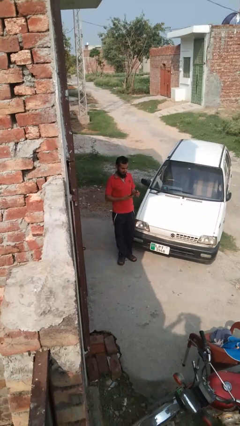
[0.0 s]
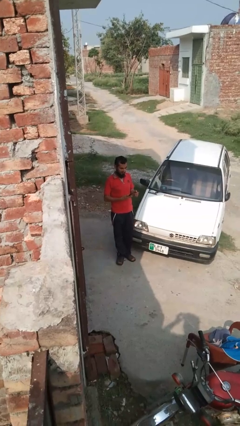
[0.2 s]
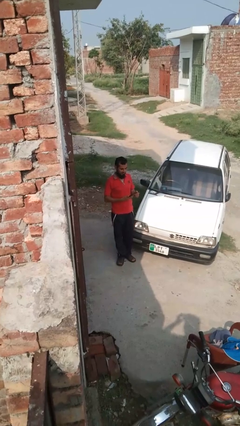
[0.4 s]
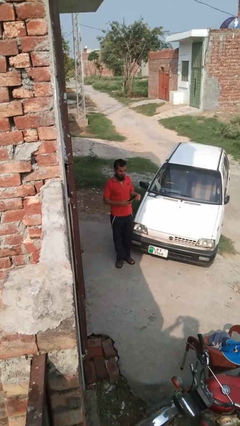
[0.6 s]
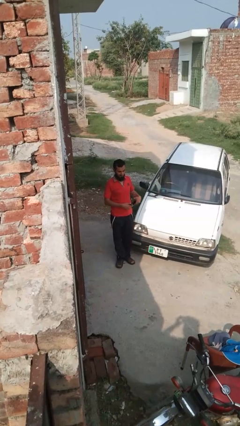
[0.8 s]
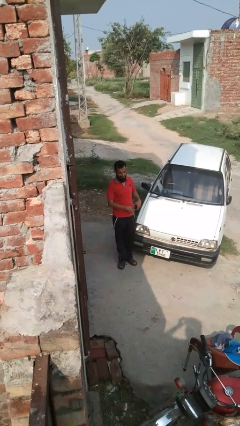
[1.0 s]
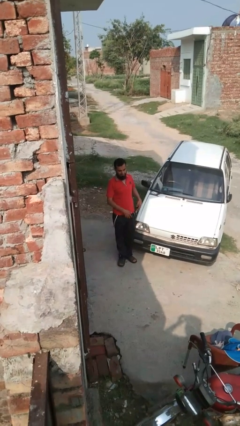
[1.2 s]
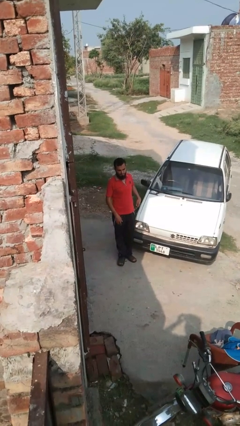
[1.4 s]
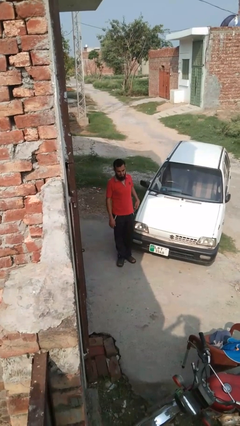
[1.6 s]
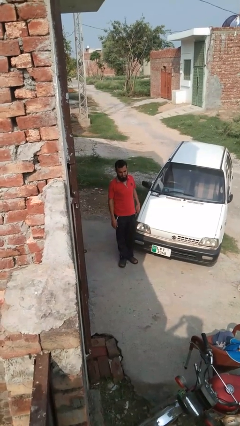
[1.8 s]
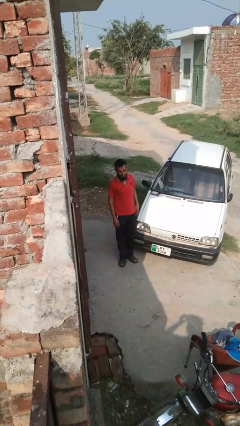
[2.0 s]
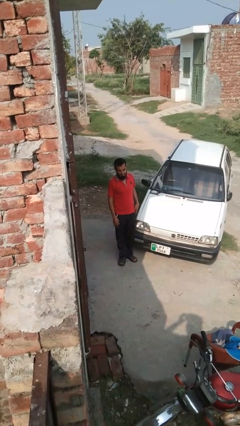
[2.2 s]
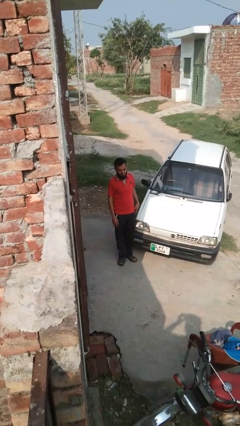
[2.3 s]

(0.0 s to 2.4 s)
person puts phone into pocket

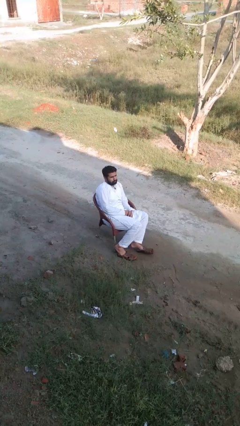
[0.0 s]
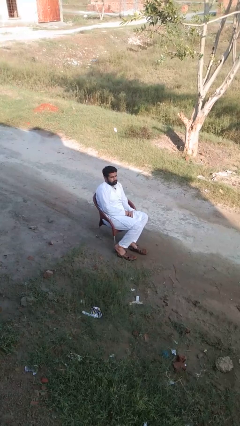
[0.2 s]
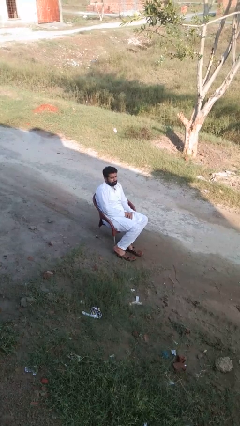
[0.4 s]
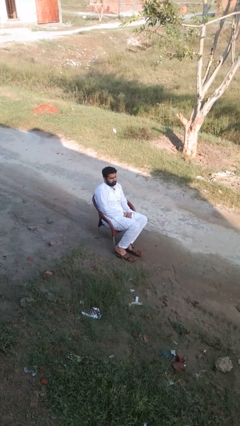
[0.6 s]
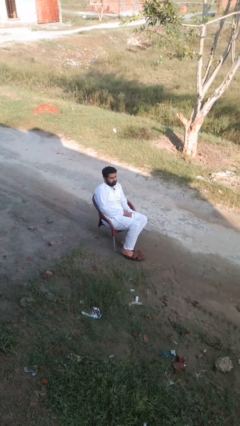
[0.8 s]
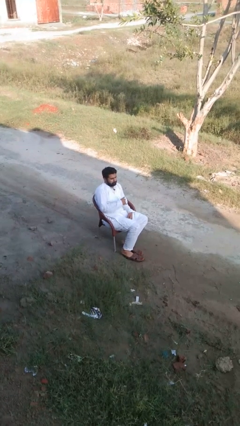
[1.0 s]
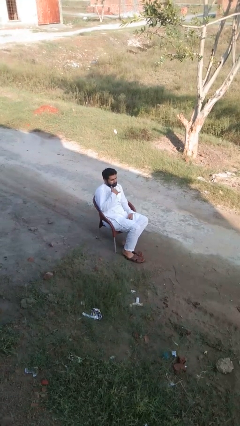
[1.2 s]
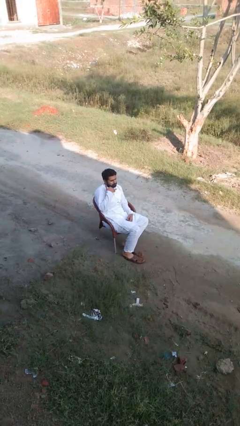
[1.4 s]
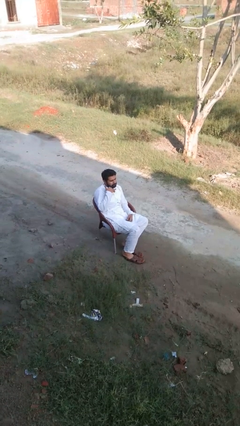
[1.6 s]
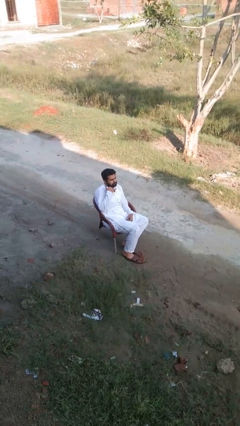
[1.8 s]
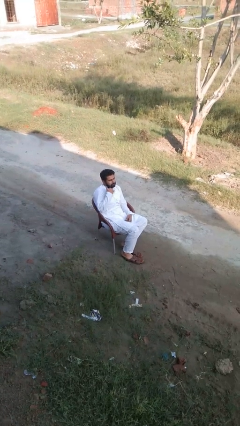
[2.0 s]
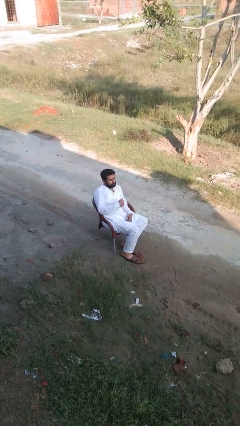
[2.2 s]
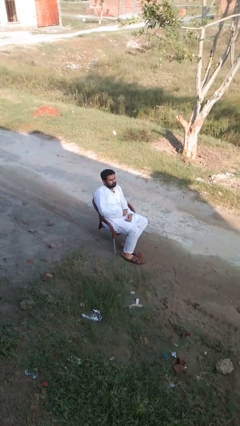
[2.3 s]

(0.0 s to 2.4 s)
person gestures call me

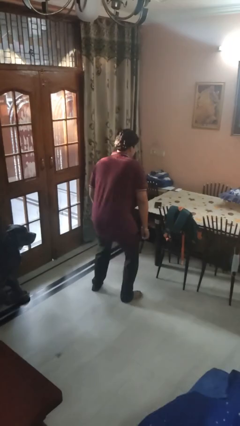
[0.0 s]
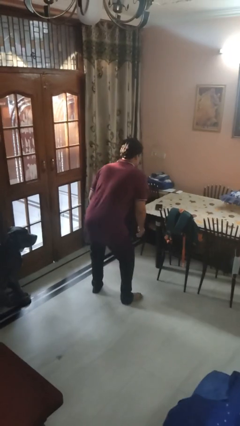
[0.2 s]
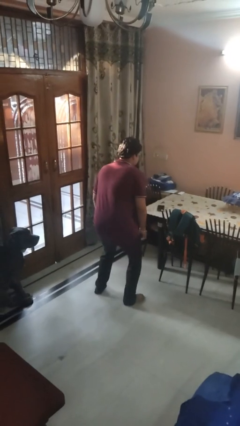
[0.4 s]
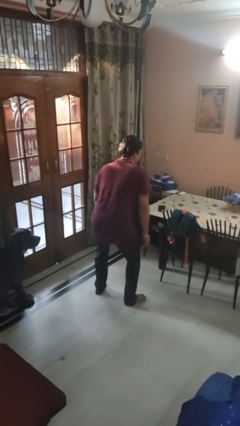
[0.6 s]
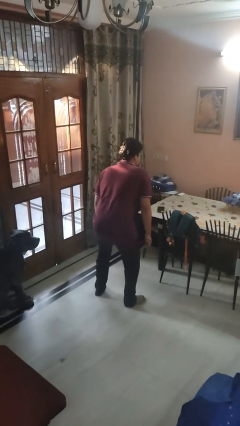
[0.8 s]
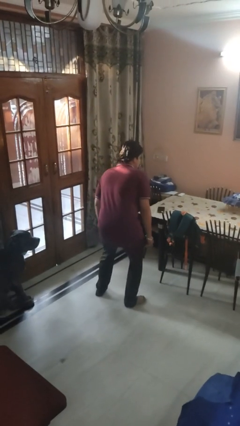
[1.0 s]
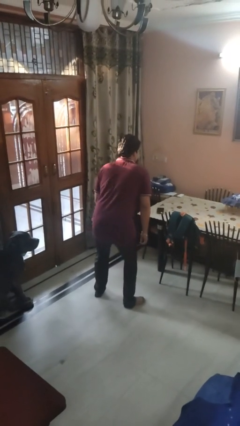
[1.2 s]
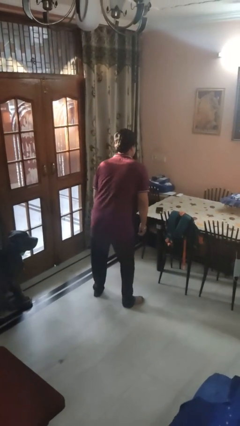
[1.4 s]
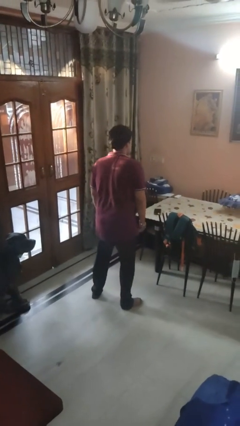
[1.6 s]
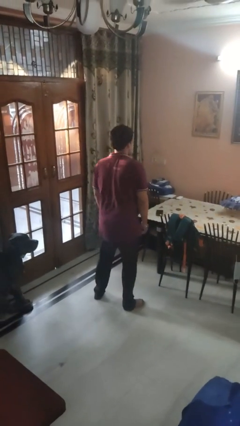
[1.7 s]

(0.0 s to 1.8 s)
person wiggles hips

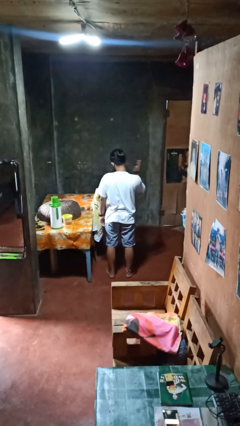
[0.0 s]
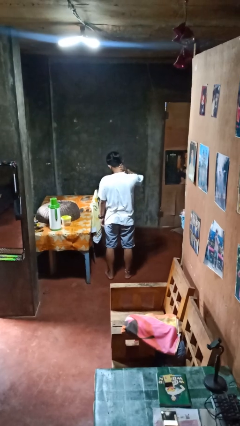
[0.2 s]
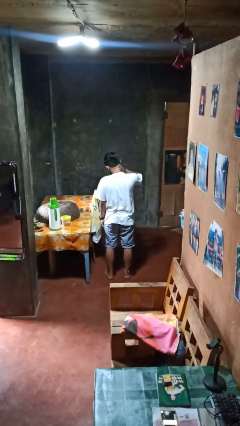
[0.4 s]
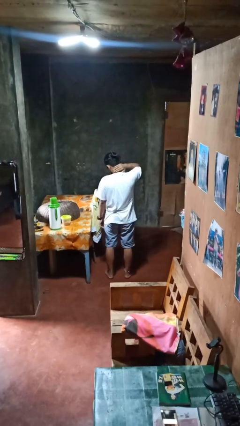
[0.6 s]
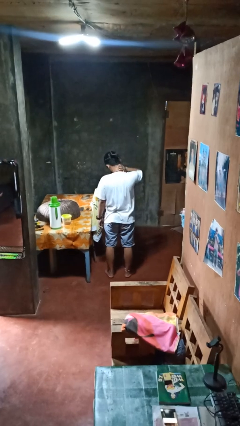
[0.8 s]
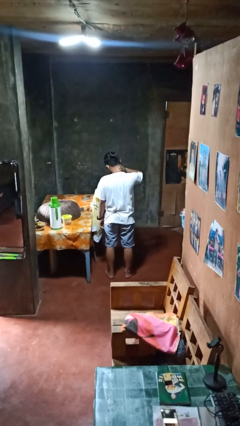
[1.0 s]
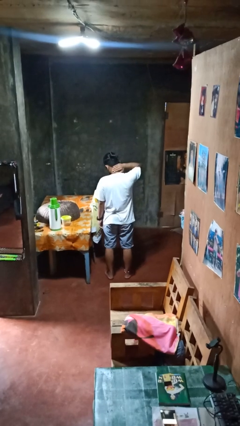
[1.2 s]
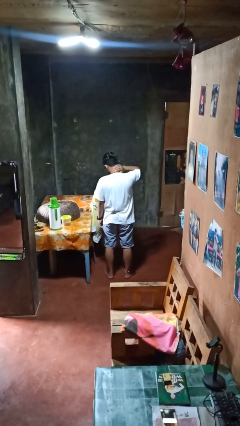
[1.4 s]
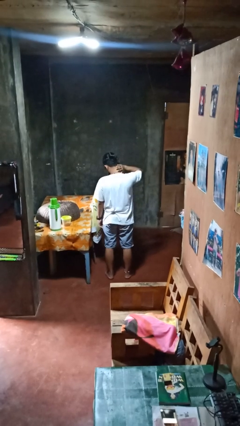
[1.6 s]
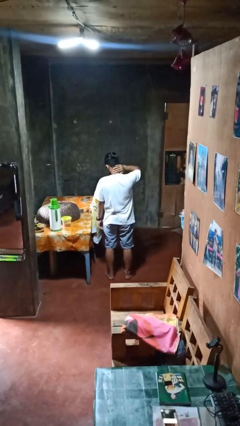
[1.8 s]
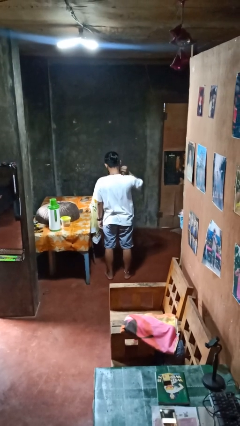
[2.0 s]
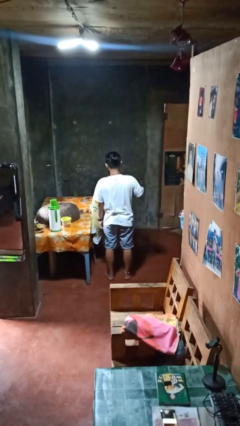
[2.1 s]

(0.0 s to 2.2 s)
person swats bug

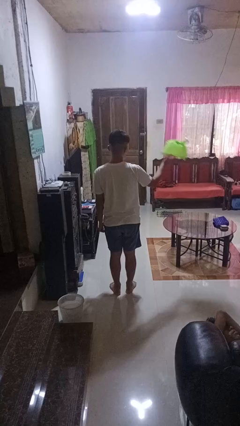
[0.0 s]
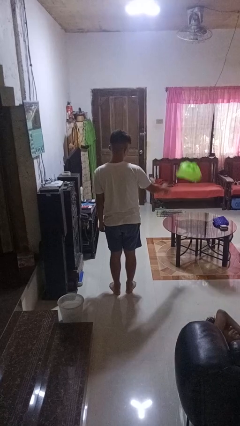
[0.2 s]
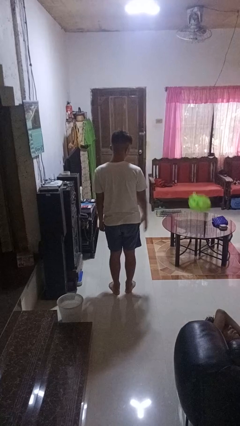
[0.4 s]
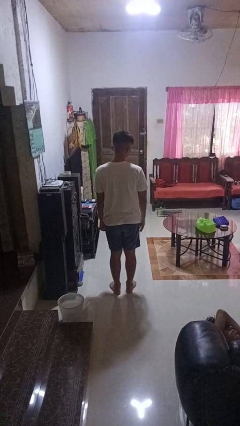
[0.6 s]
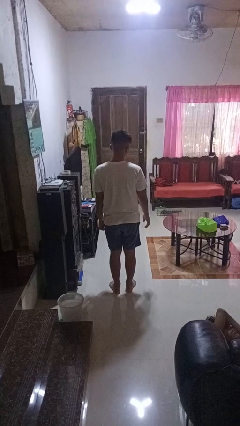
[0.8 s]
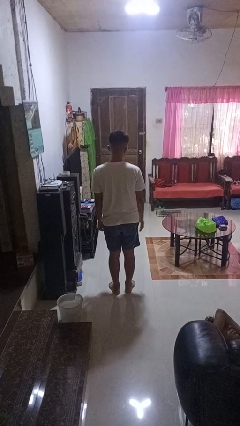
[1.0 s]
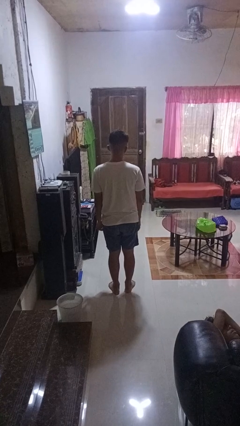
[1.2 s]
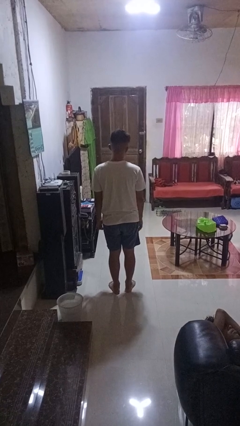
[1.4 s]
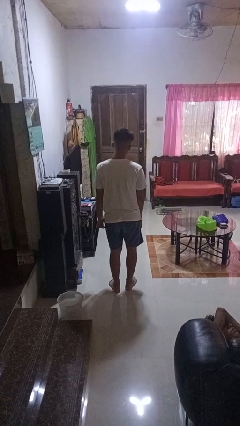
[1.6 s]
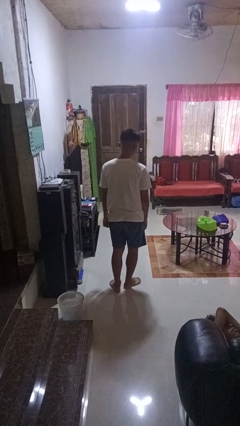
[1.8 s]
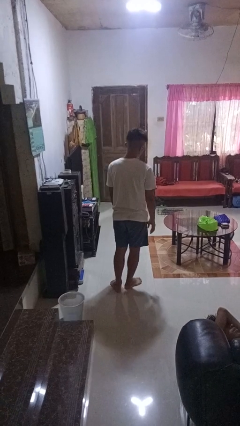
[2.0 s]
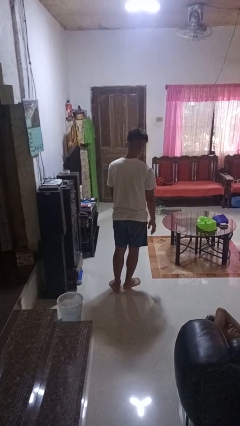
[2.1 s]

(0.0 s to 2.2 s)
person throws object on table

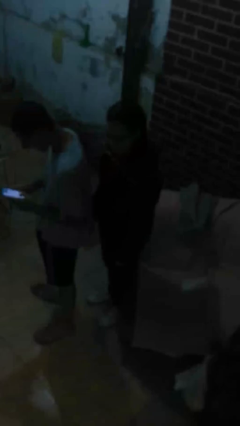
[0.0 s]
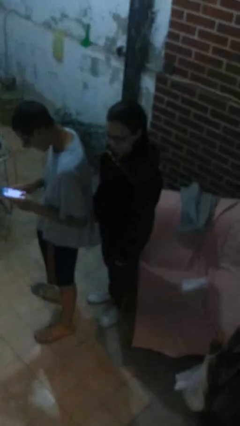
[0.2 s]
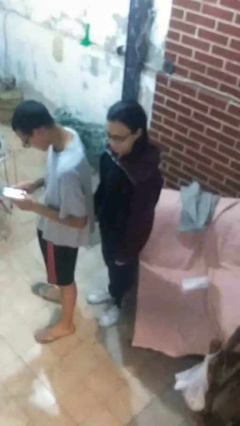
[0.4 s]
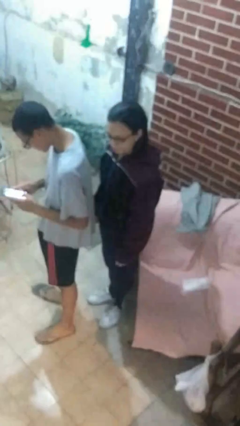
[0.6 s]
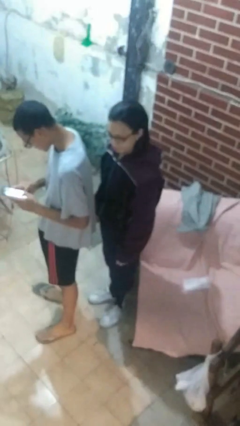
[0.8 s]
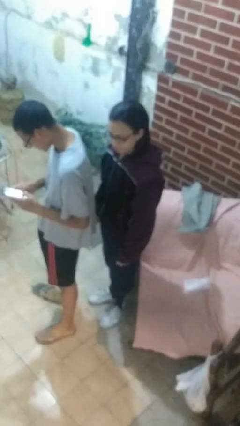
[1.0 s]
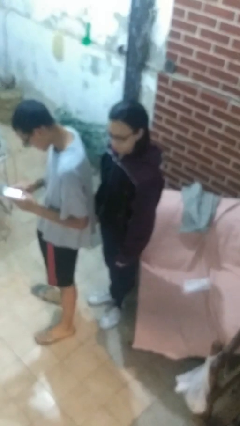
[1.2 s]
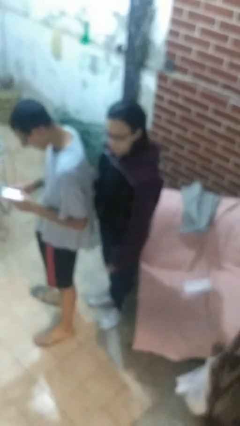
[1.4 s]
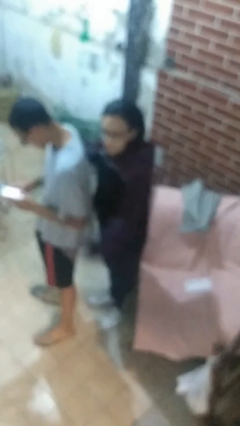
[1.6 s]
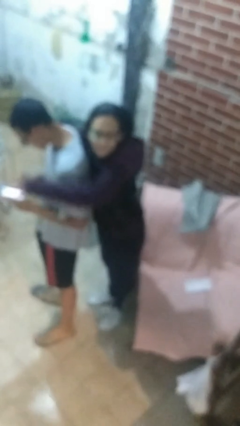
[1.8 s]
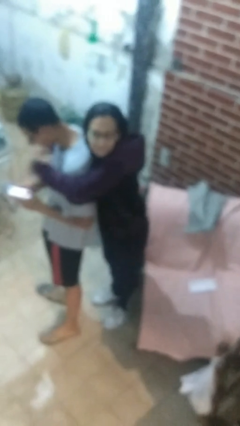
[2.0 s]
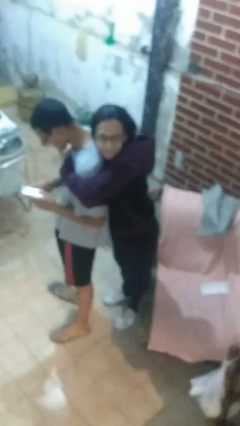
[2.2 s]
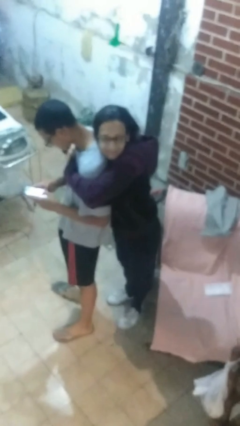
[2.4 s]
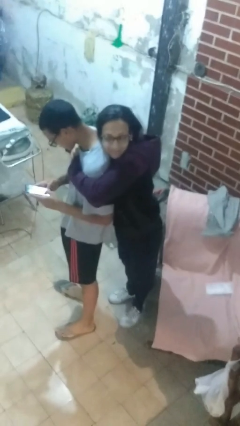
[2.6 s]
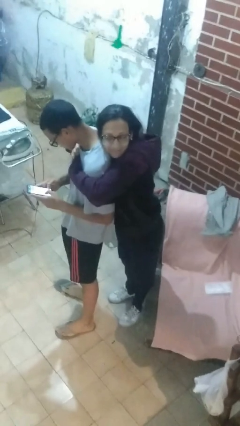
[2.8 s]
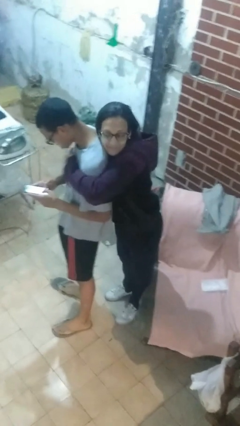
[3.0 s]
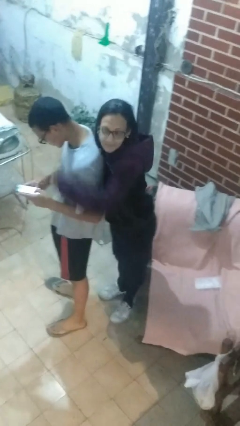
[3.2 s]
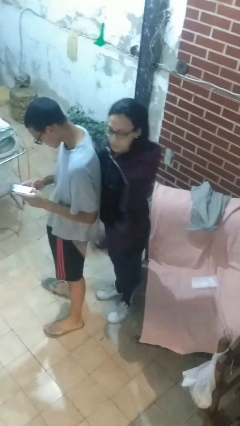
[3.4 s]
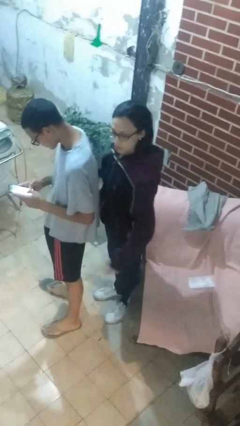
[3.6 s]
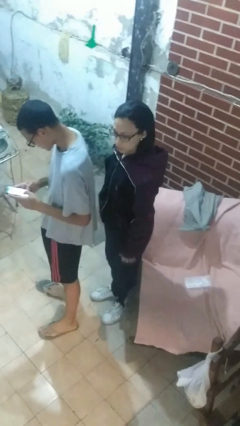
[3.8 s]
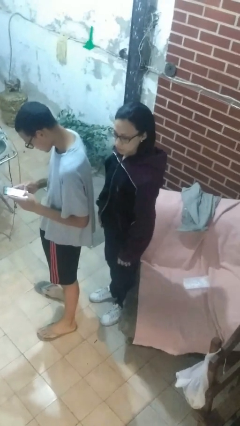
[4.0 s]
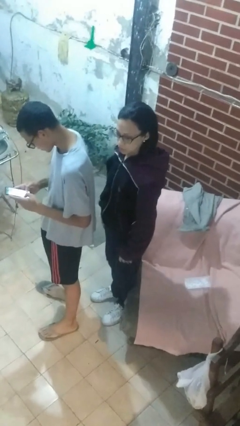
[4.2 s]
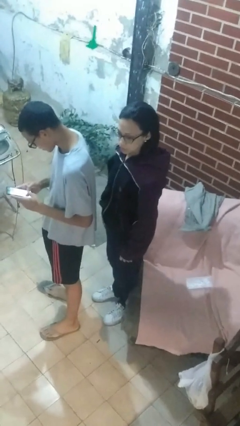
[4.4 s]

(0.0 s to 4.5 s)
person hugs person from behind

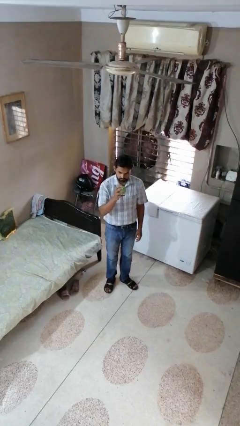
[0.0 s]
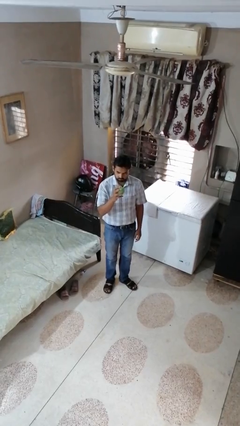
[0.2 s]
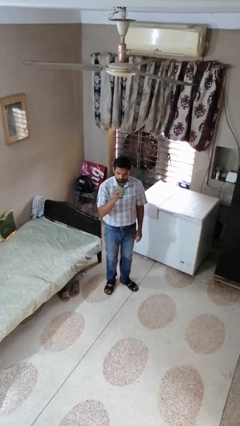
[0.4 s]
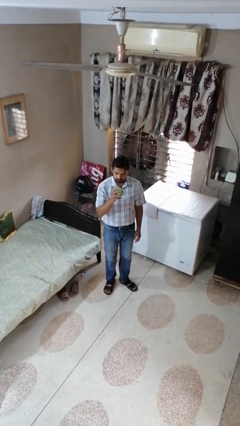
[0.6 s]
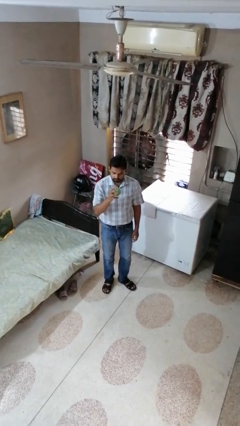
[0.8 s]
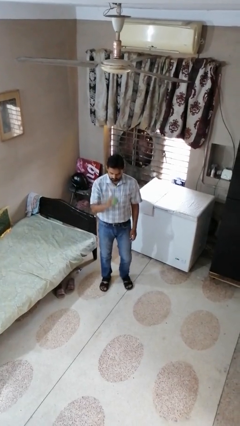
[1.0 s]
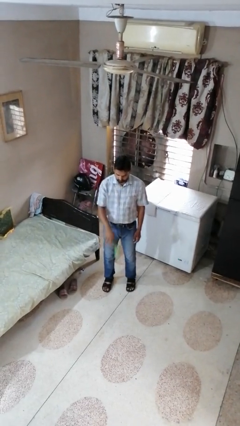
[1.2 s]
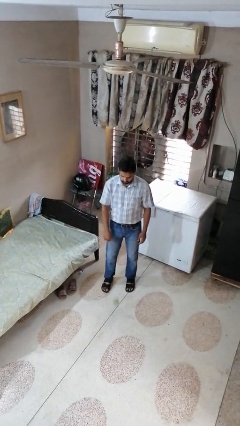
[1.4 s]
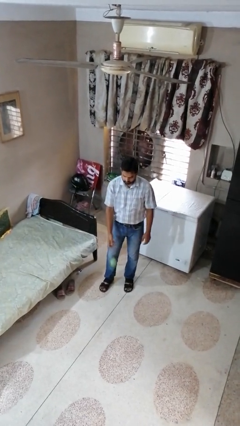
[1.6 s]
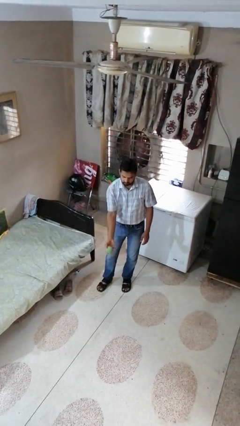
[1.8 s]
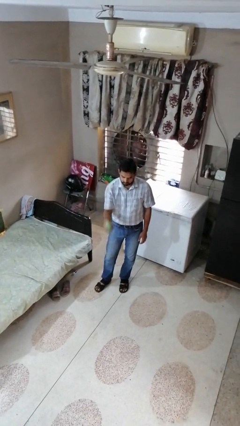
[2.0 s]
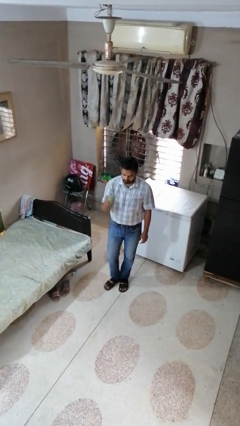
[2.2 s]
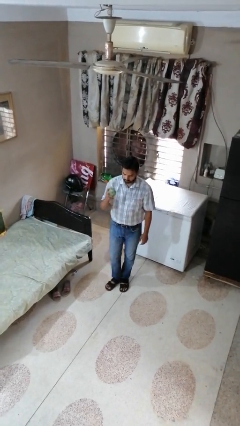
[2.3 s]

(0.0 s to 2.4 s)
person bounces ball on floor
